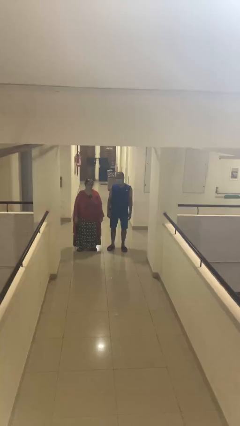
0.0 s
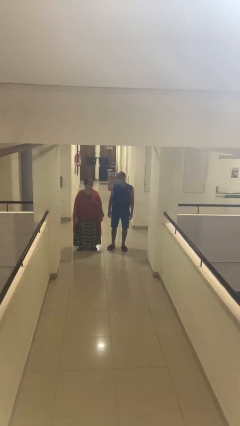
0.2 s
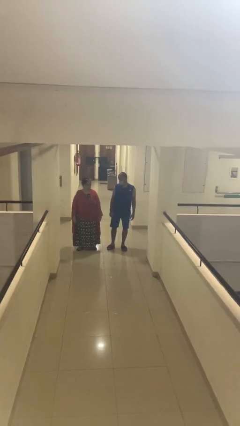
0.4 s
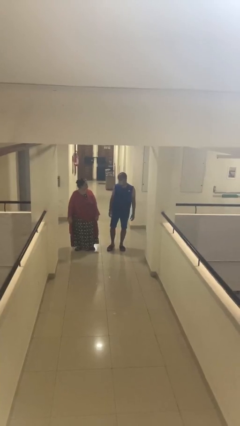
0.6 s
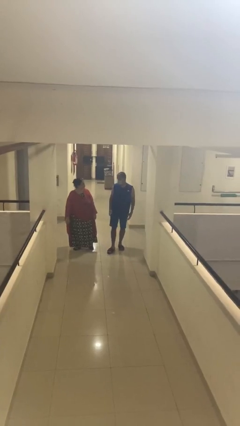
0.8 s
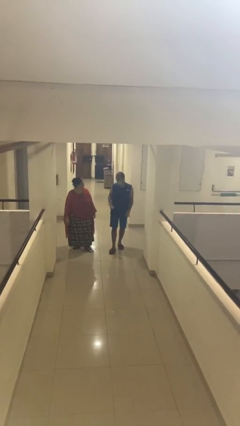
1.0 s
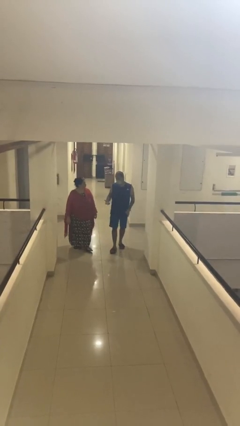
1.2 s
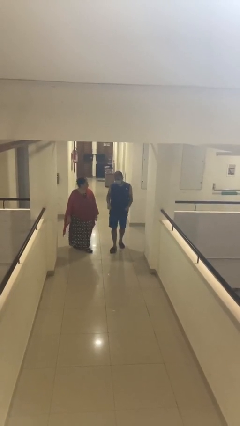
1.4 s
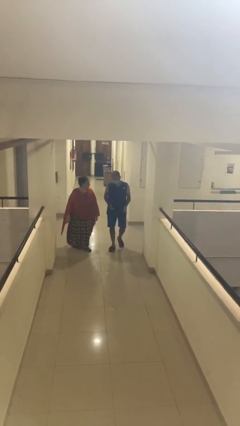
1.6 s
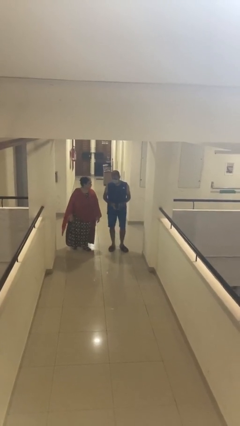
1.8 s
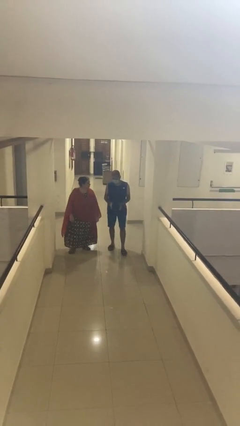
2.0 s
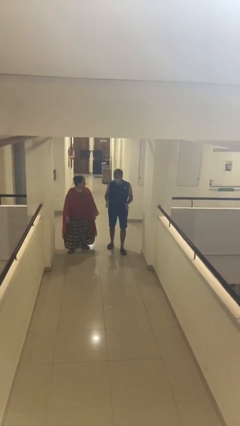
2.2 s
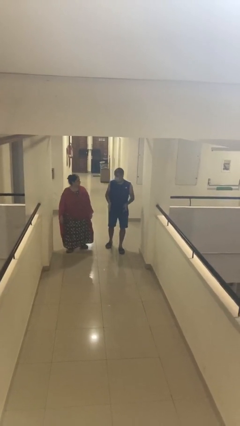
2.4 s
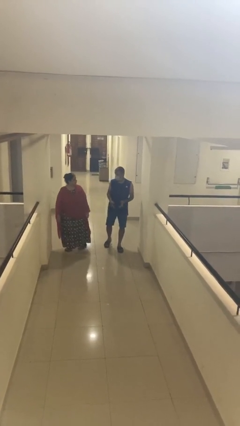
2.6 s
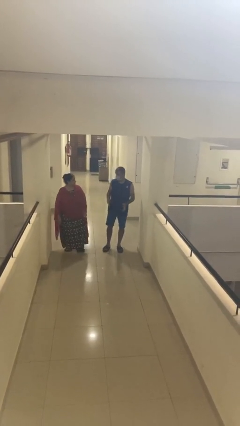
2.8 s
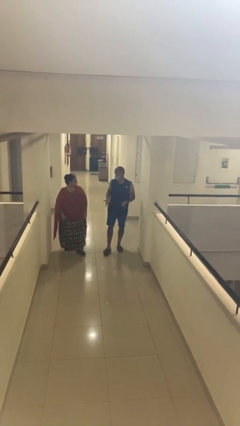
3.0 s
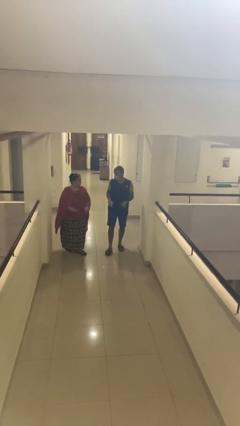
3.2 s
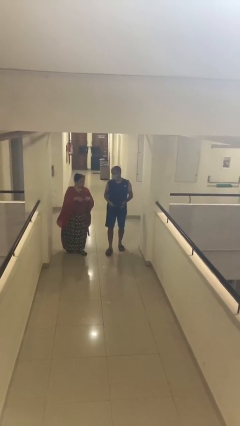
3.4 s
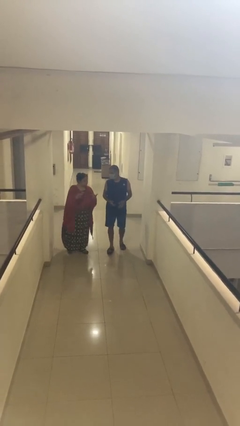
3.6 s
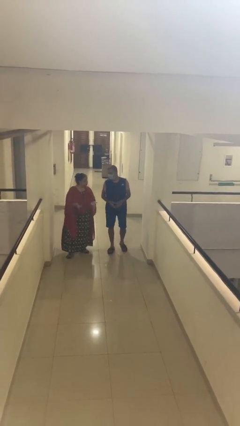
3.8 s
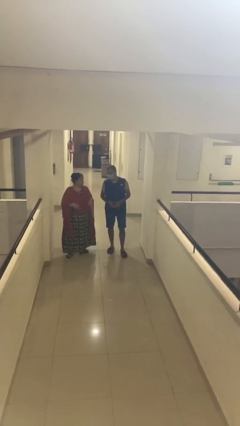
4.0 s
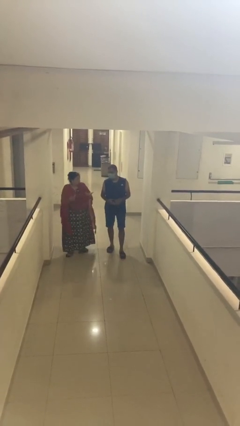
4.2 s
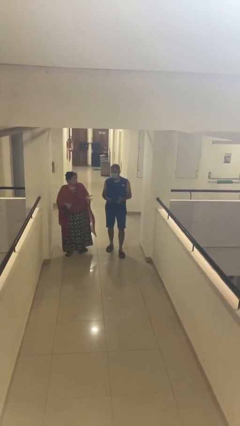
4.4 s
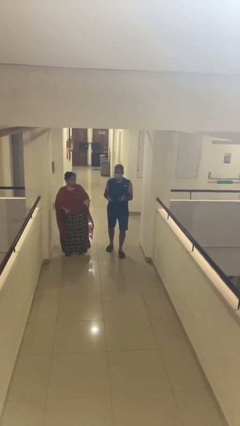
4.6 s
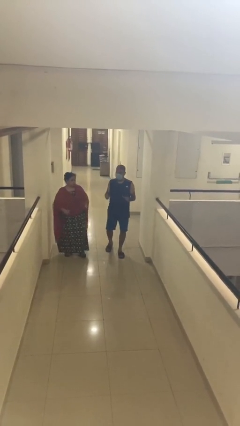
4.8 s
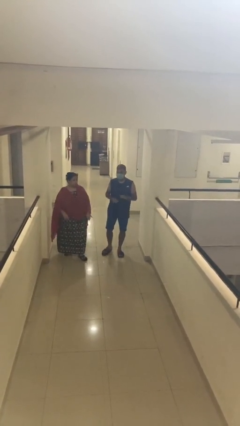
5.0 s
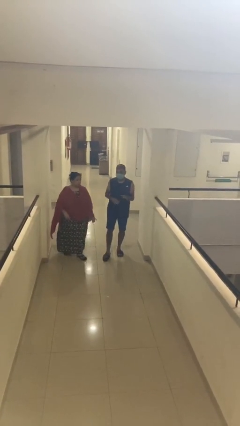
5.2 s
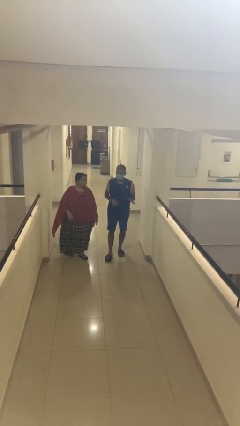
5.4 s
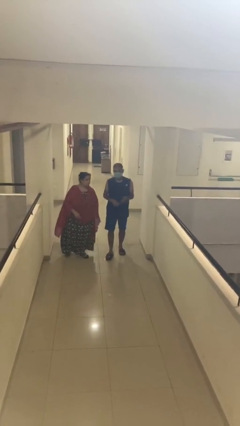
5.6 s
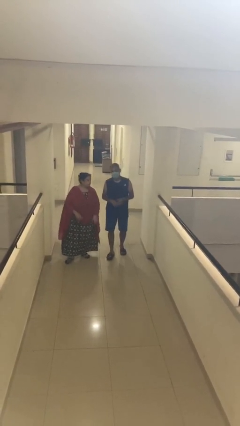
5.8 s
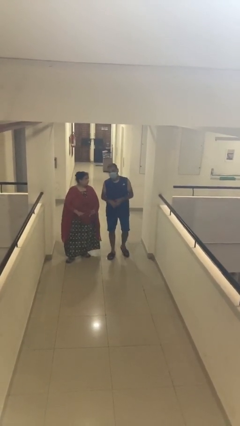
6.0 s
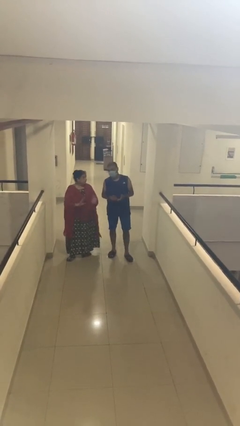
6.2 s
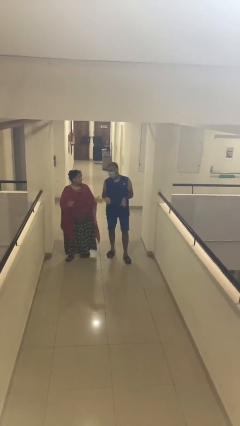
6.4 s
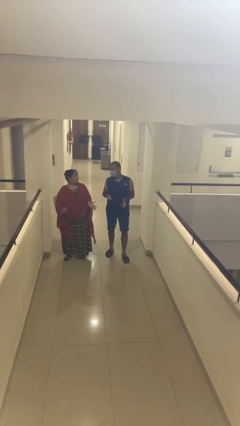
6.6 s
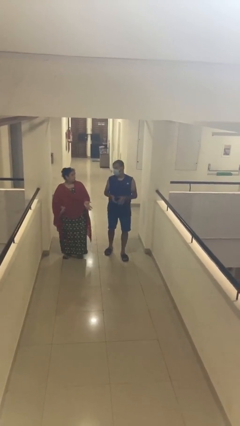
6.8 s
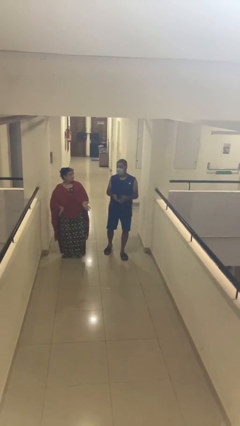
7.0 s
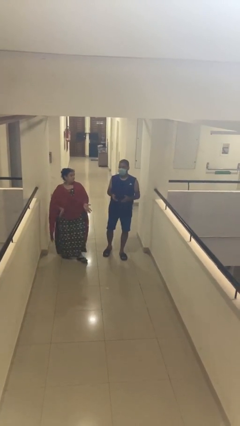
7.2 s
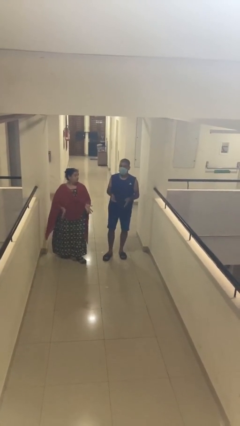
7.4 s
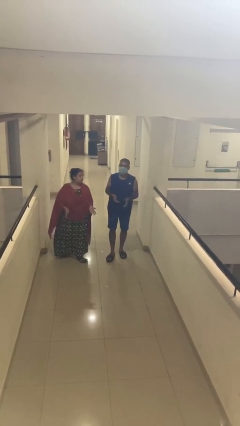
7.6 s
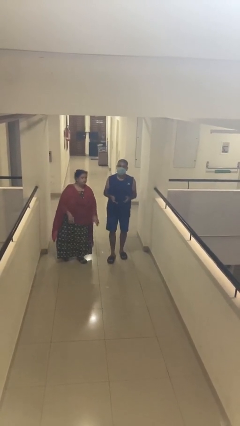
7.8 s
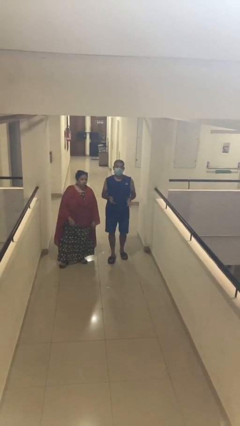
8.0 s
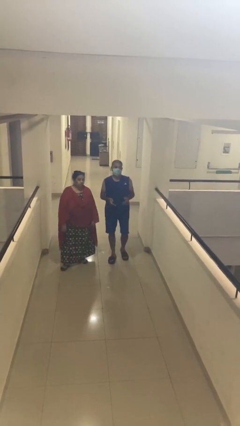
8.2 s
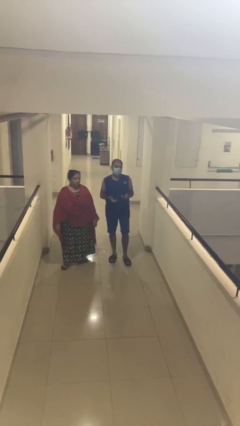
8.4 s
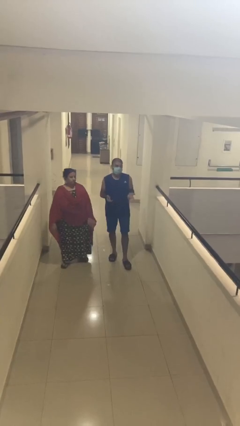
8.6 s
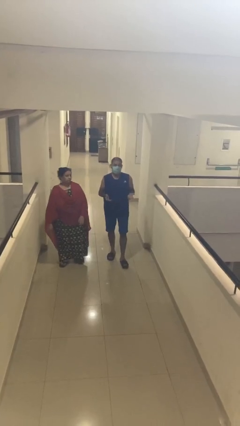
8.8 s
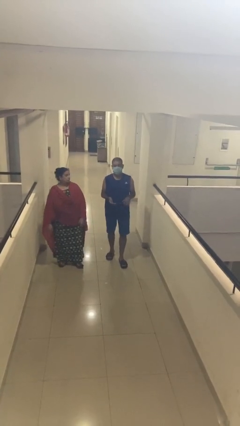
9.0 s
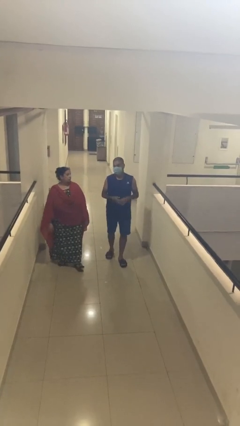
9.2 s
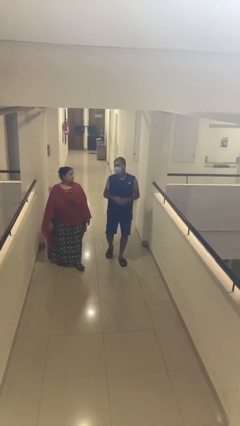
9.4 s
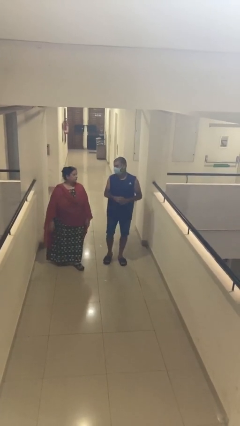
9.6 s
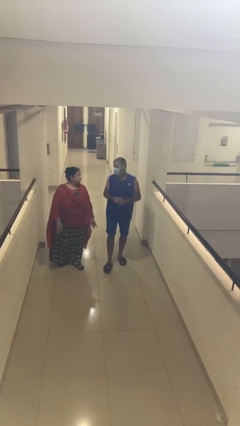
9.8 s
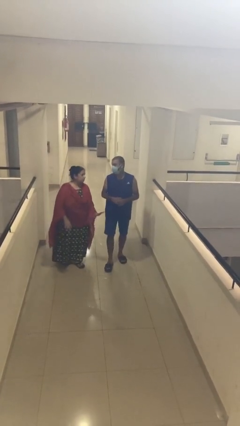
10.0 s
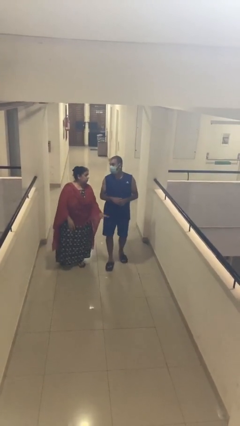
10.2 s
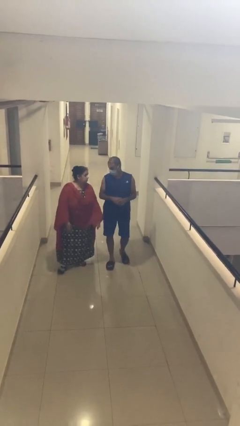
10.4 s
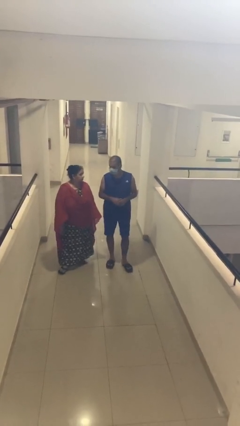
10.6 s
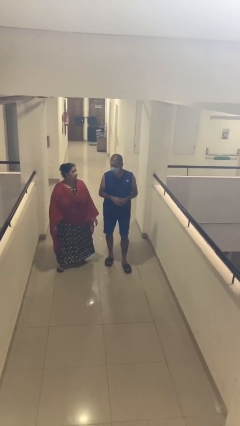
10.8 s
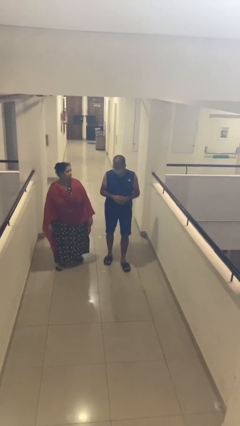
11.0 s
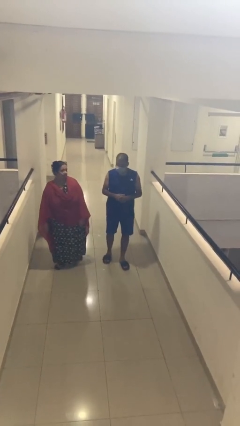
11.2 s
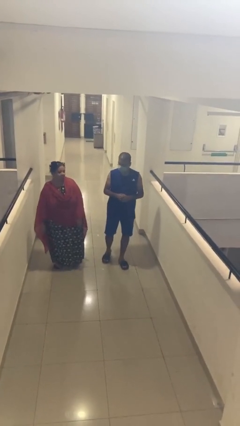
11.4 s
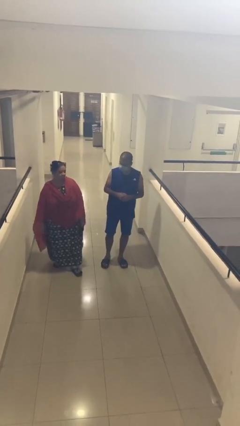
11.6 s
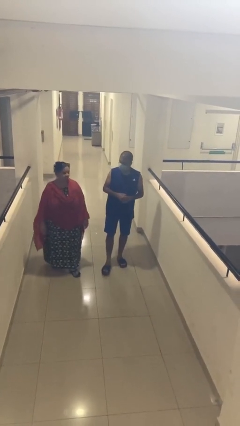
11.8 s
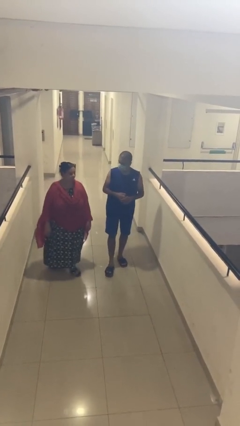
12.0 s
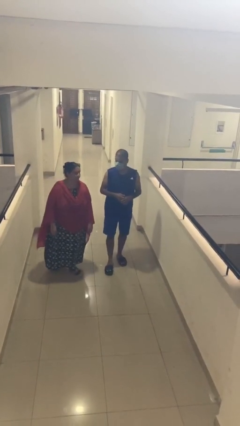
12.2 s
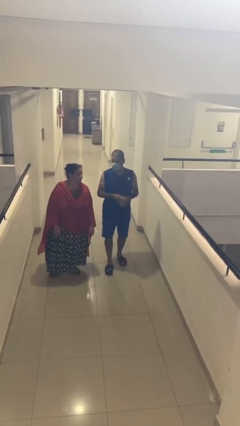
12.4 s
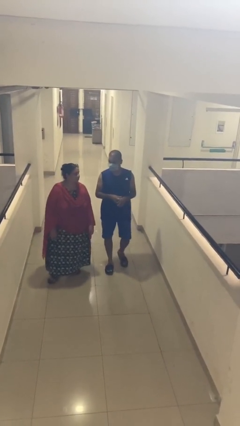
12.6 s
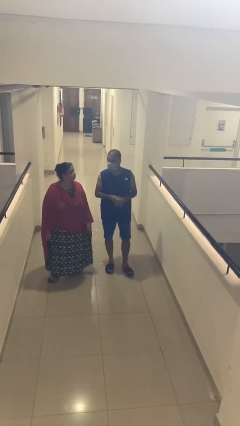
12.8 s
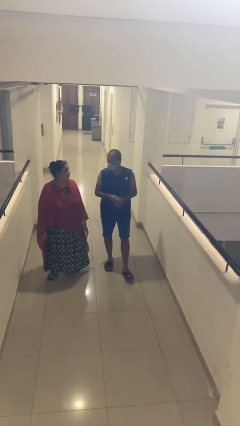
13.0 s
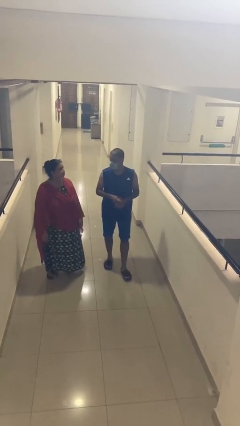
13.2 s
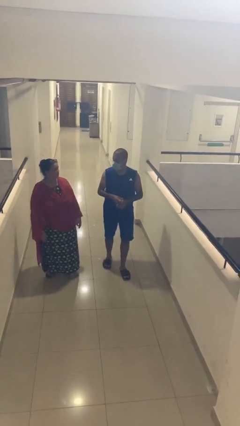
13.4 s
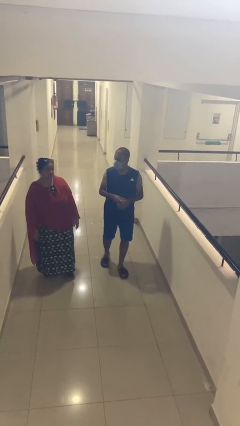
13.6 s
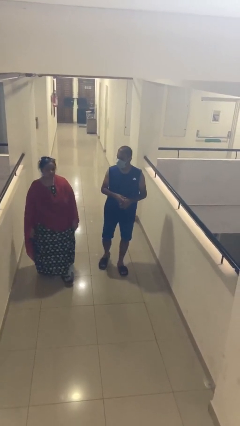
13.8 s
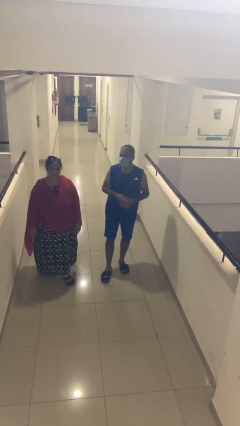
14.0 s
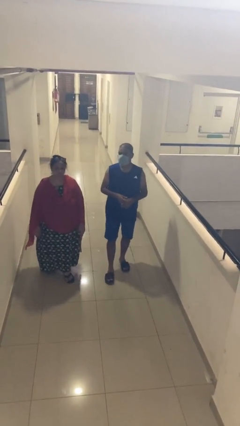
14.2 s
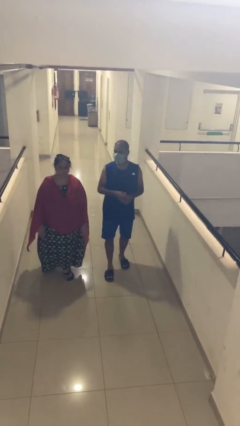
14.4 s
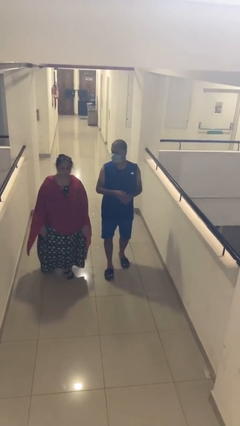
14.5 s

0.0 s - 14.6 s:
person talks to person
